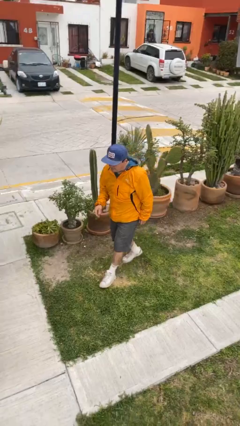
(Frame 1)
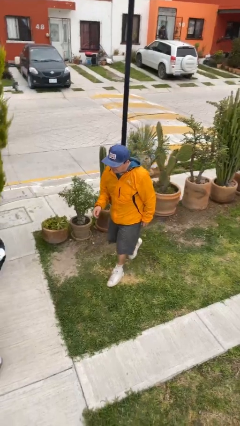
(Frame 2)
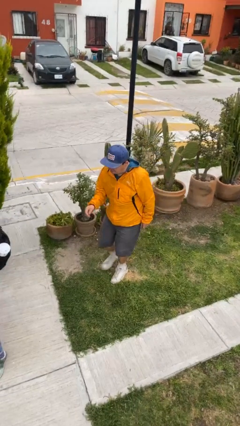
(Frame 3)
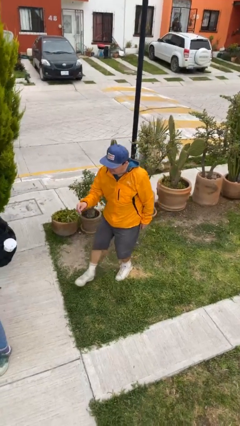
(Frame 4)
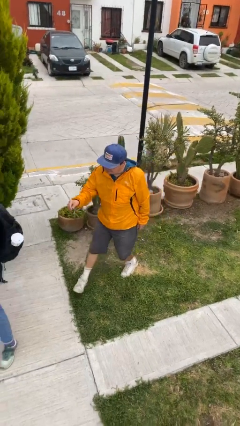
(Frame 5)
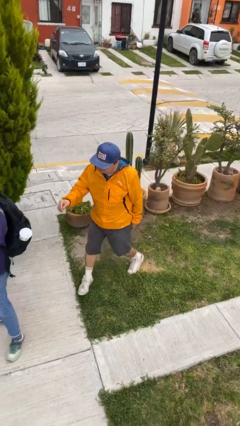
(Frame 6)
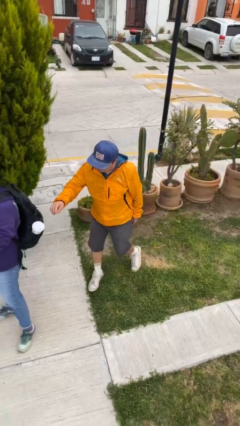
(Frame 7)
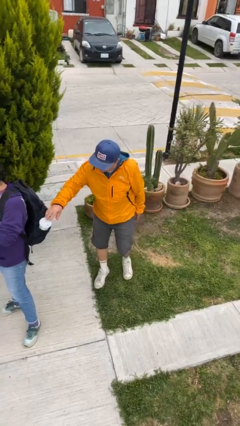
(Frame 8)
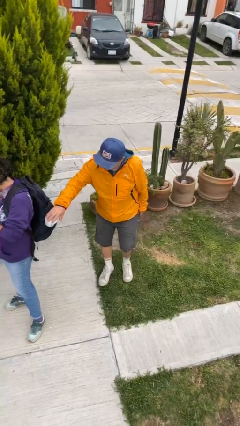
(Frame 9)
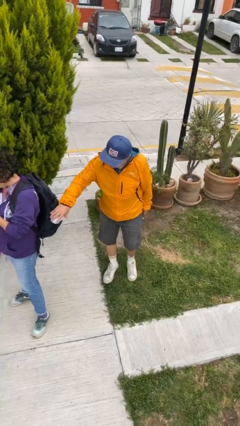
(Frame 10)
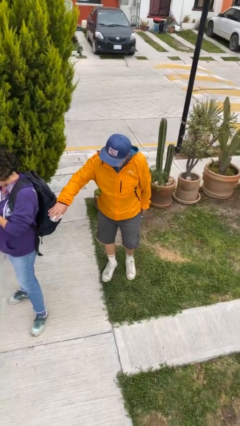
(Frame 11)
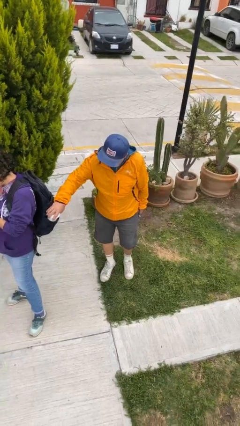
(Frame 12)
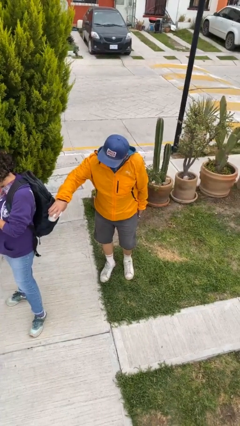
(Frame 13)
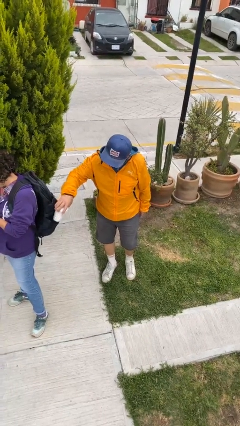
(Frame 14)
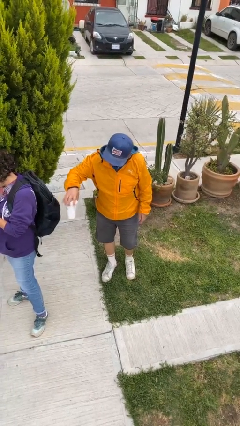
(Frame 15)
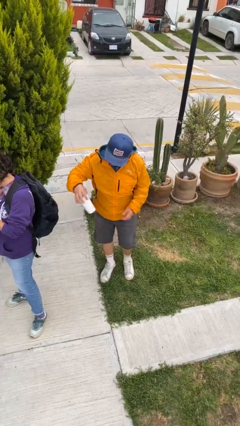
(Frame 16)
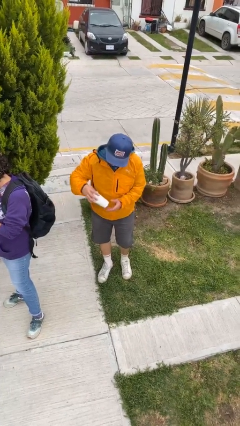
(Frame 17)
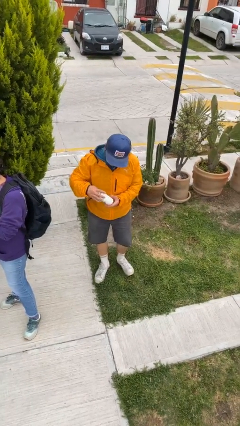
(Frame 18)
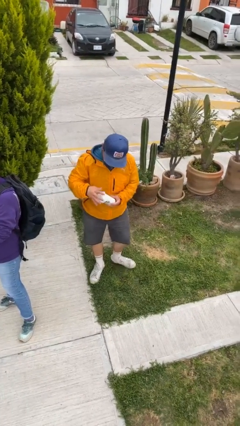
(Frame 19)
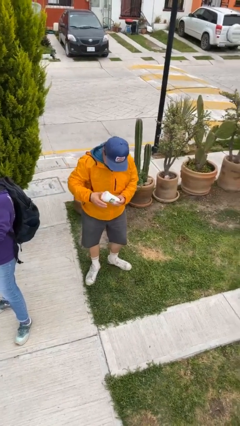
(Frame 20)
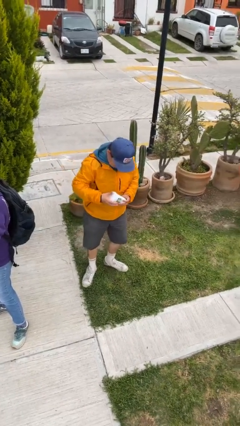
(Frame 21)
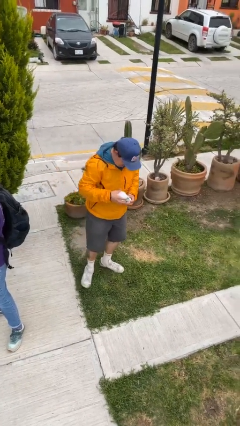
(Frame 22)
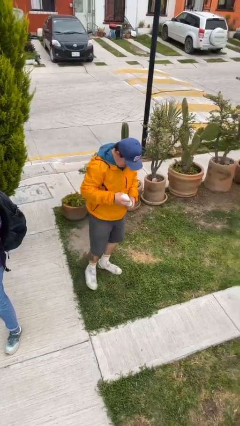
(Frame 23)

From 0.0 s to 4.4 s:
person steals object from person

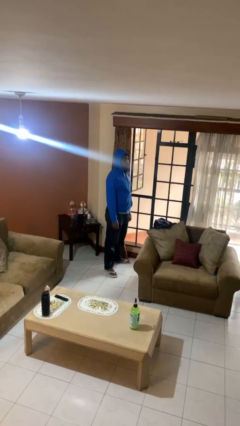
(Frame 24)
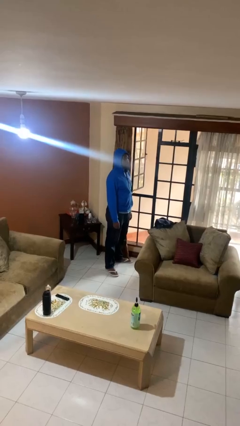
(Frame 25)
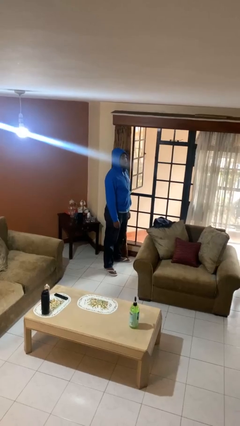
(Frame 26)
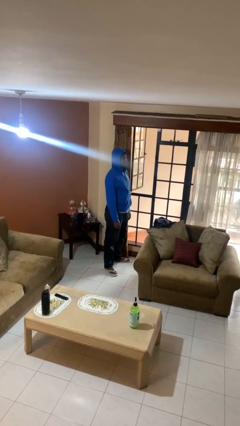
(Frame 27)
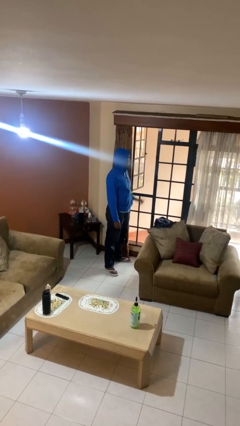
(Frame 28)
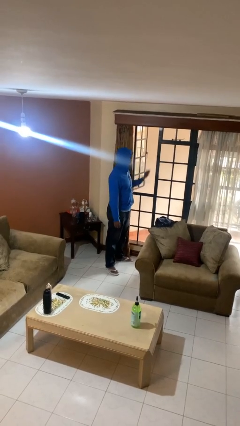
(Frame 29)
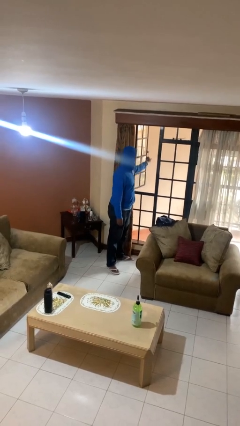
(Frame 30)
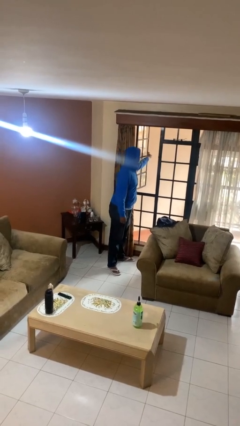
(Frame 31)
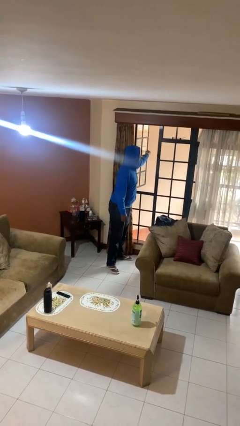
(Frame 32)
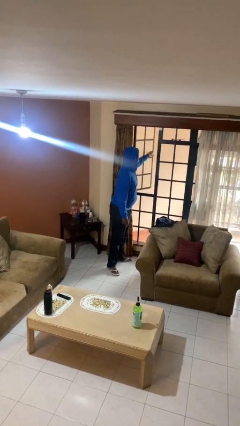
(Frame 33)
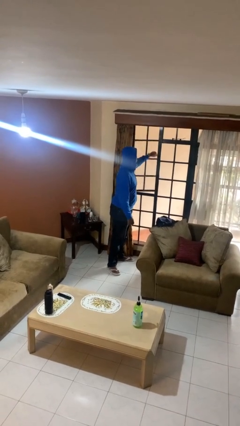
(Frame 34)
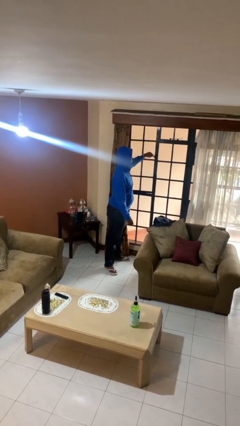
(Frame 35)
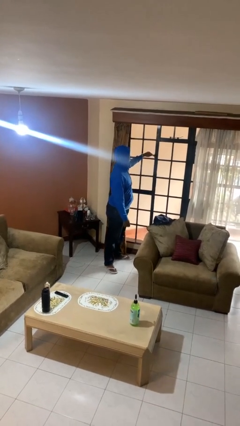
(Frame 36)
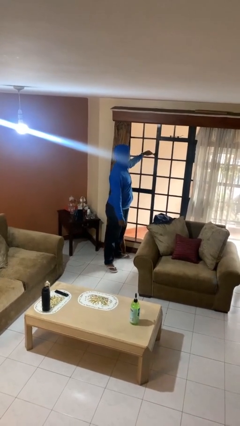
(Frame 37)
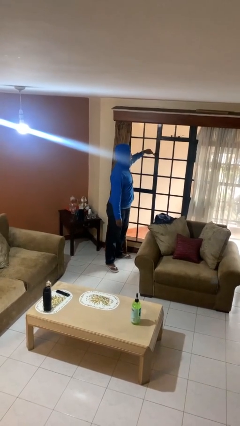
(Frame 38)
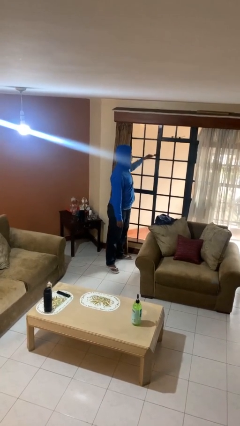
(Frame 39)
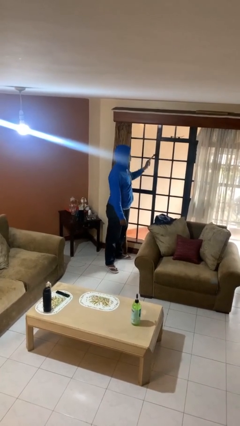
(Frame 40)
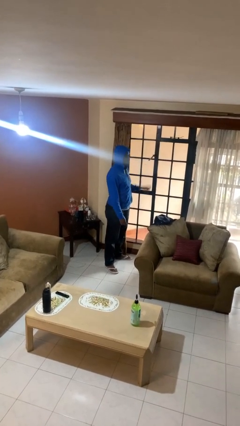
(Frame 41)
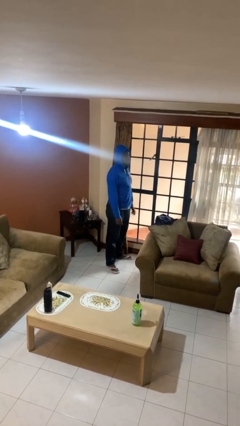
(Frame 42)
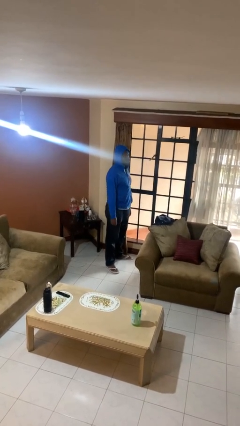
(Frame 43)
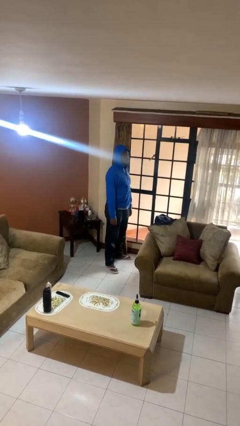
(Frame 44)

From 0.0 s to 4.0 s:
person closes home window

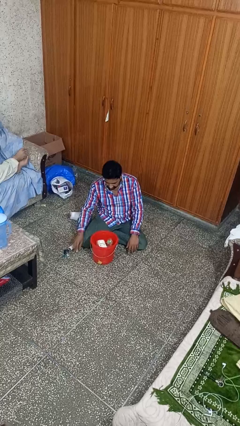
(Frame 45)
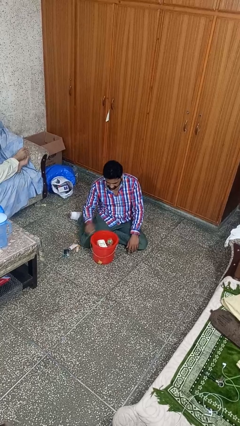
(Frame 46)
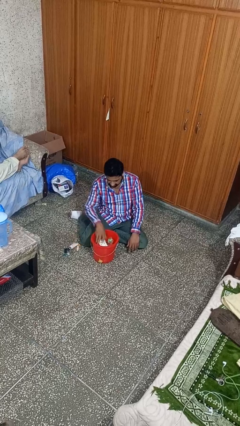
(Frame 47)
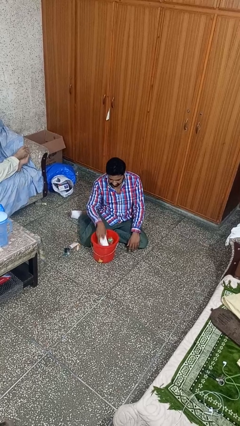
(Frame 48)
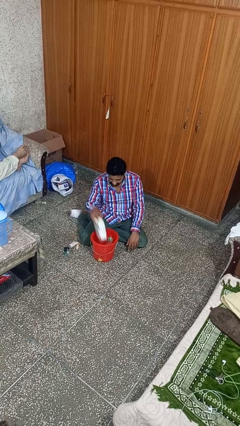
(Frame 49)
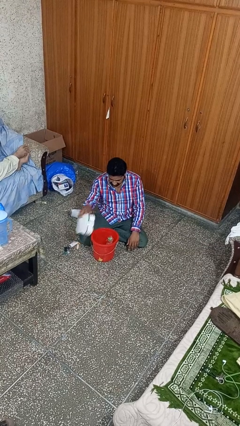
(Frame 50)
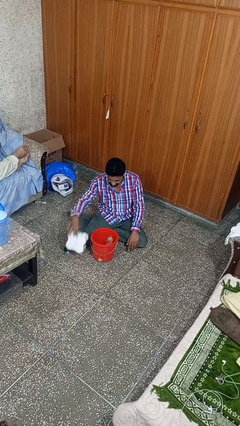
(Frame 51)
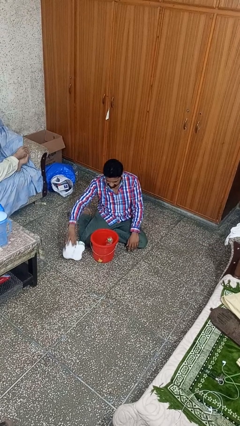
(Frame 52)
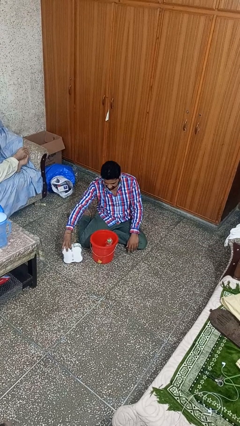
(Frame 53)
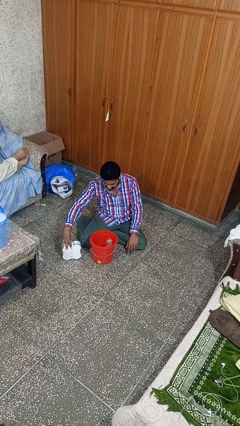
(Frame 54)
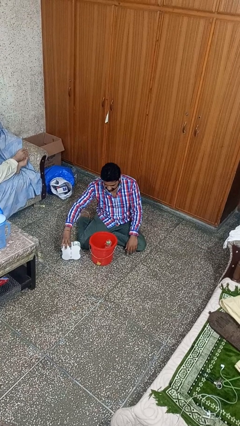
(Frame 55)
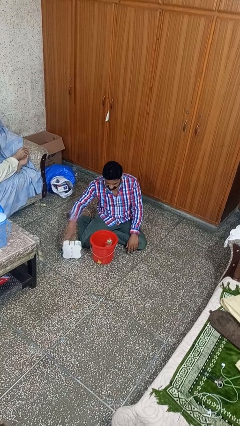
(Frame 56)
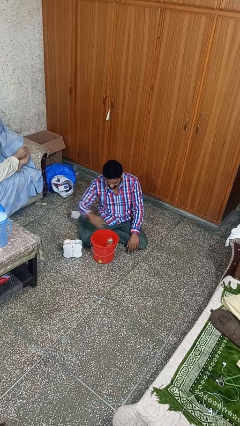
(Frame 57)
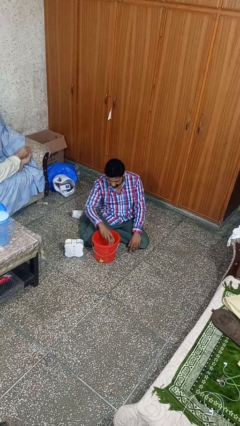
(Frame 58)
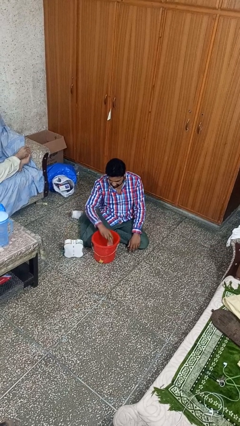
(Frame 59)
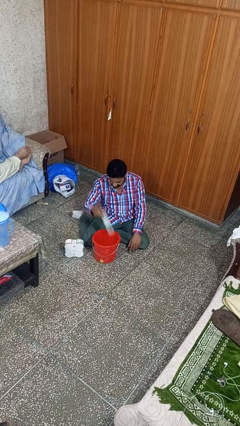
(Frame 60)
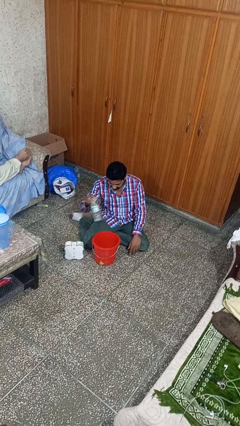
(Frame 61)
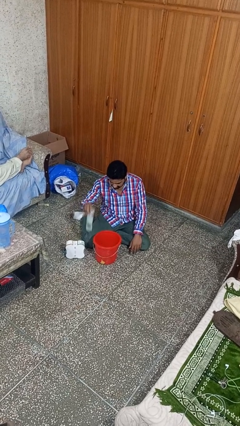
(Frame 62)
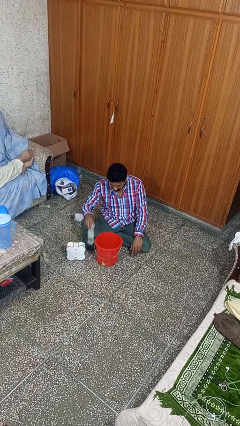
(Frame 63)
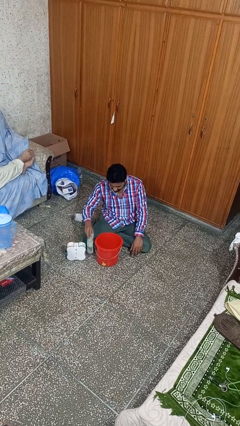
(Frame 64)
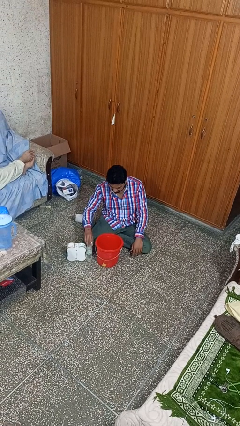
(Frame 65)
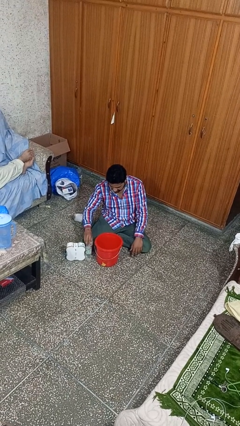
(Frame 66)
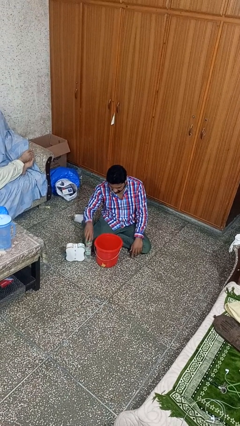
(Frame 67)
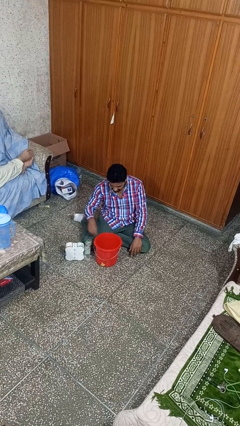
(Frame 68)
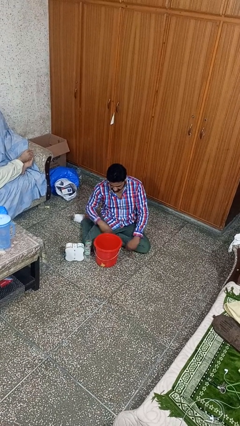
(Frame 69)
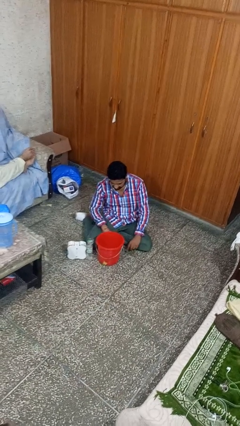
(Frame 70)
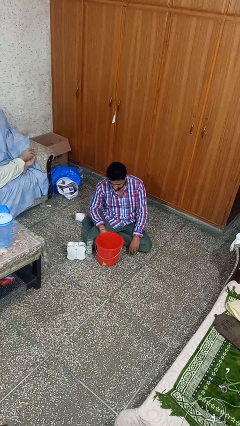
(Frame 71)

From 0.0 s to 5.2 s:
person takes object from basket

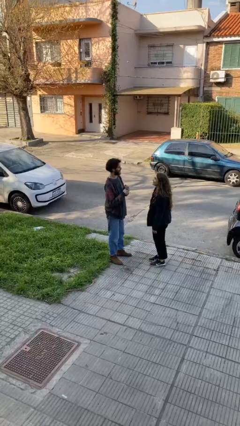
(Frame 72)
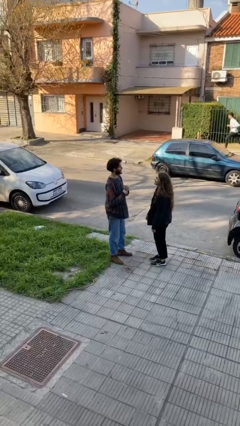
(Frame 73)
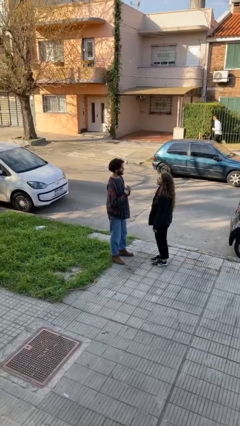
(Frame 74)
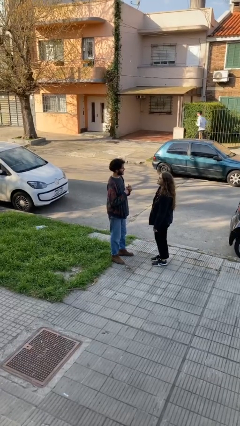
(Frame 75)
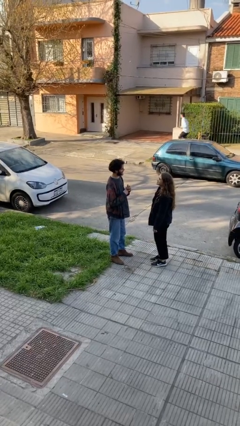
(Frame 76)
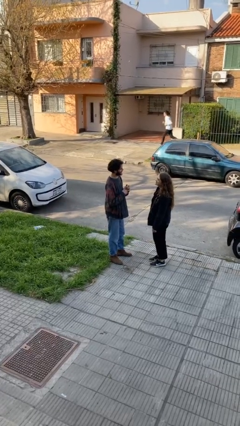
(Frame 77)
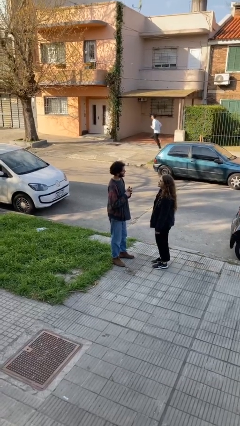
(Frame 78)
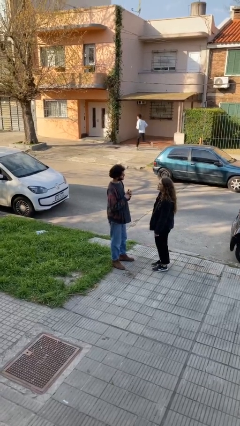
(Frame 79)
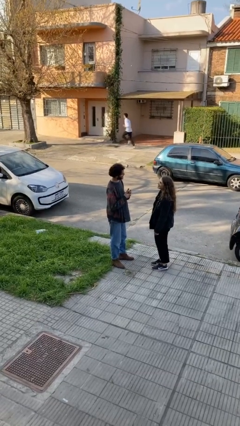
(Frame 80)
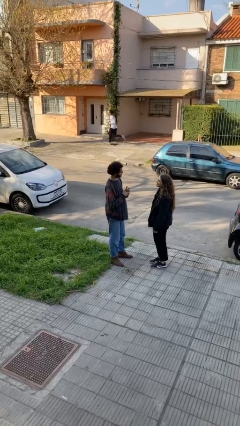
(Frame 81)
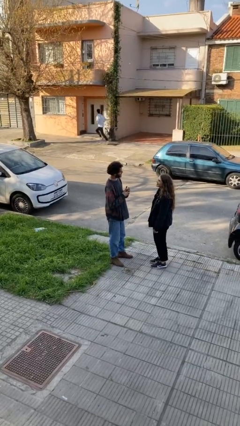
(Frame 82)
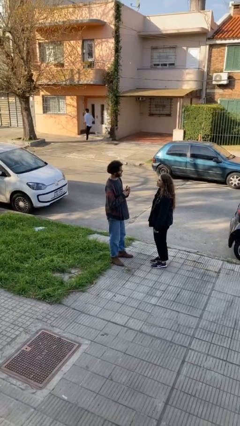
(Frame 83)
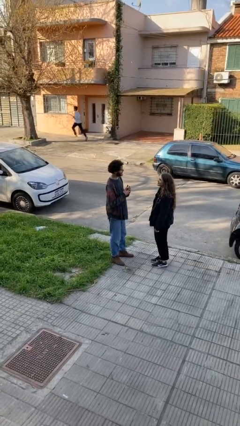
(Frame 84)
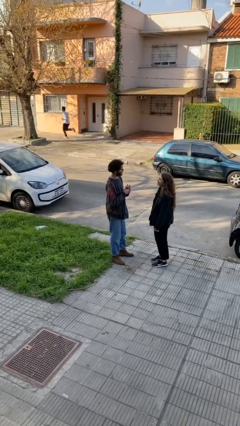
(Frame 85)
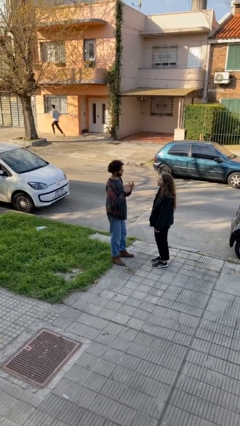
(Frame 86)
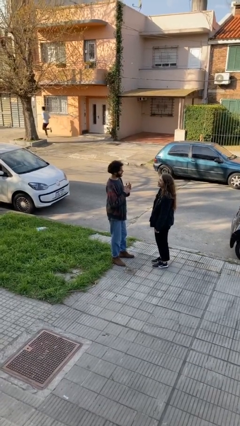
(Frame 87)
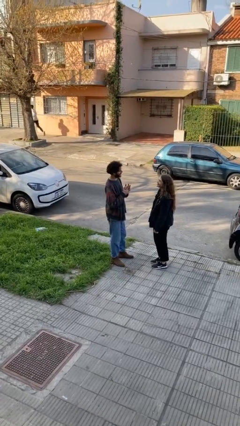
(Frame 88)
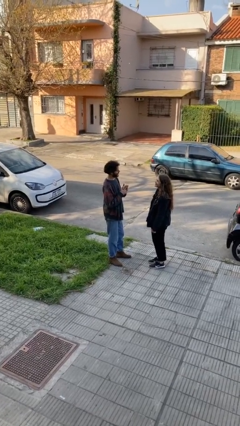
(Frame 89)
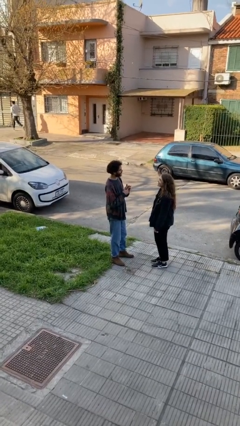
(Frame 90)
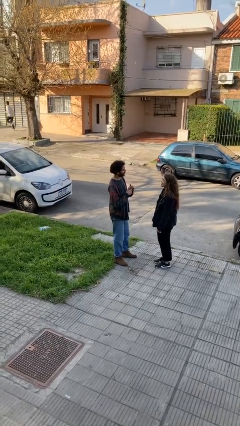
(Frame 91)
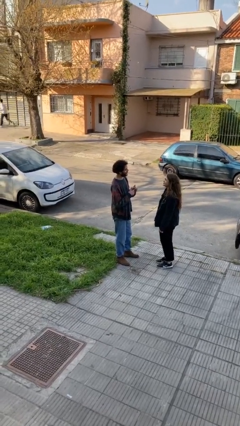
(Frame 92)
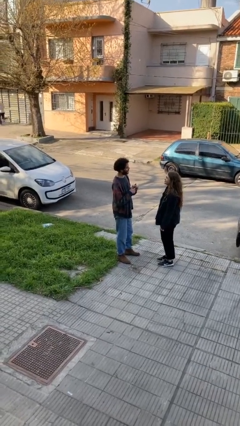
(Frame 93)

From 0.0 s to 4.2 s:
person talks to person
